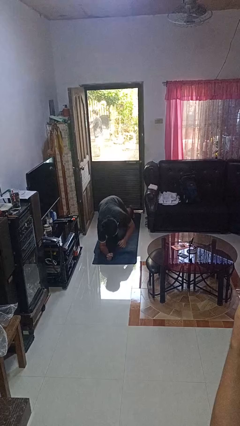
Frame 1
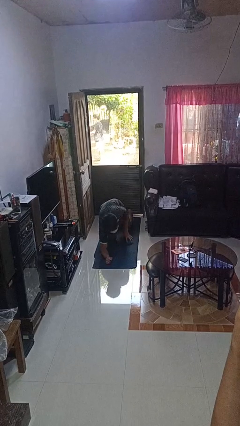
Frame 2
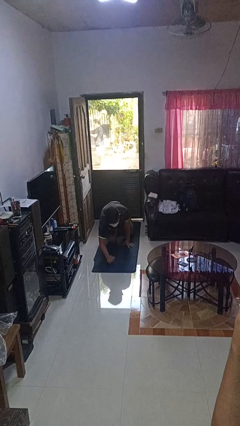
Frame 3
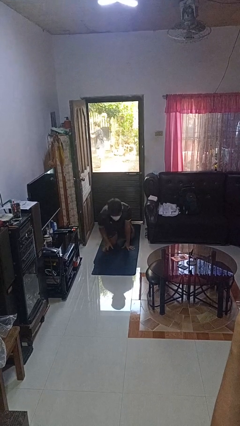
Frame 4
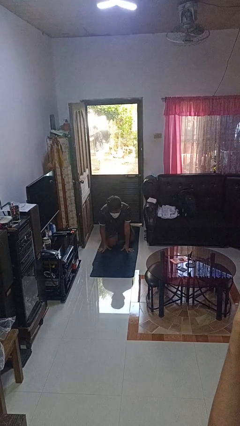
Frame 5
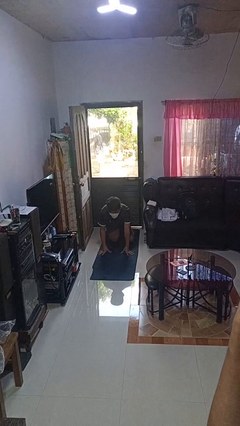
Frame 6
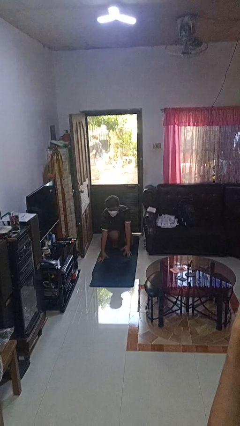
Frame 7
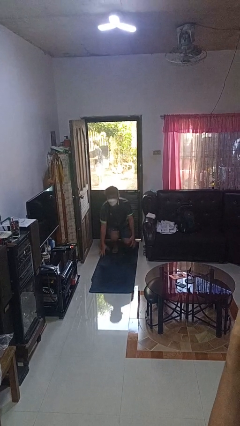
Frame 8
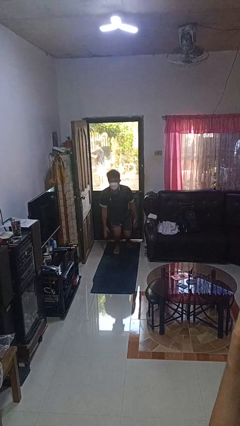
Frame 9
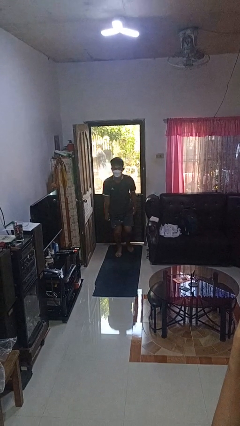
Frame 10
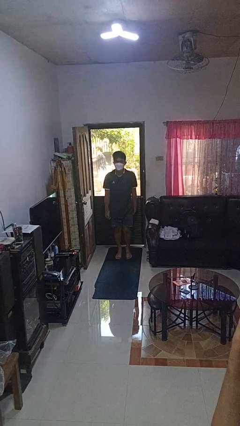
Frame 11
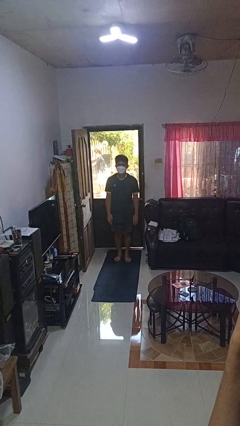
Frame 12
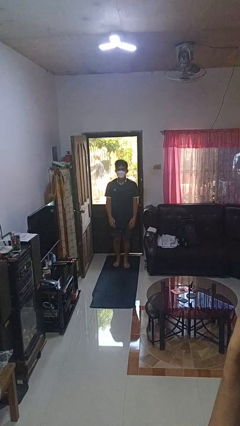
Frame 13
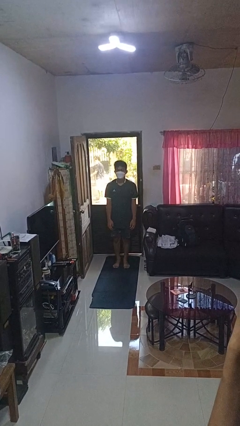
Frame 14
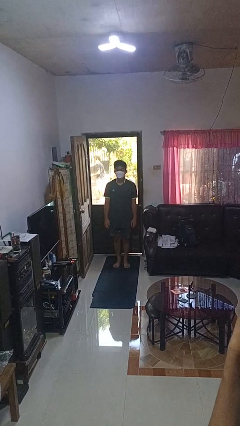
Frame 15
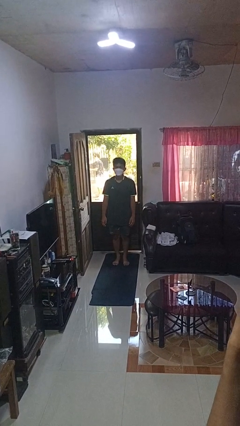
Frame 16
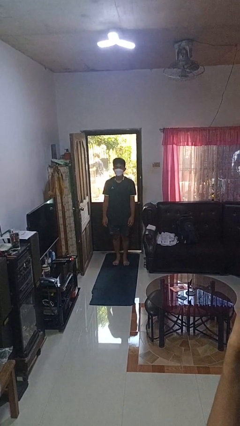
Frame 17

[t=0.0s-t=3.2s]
person stands up from floor

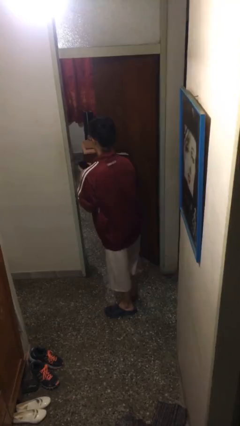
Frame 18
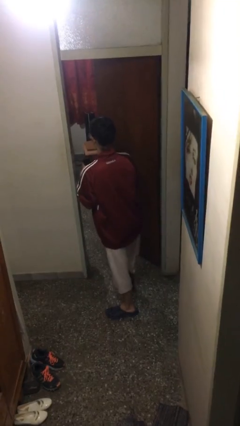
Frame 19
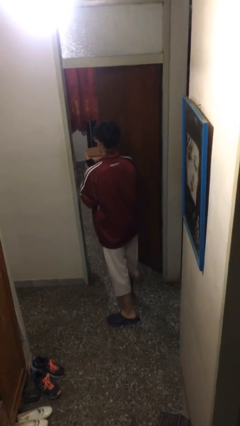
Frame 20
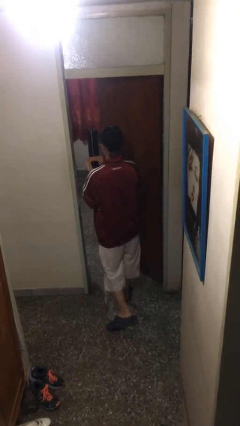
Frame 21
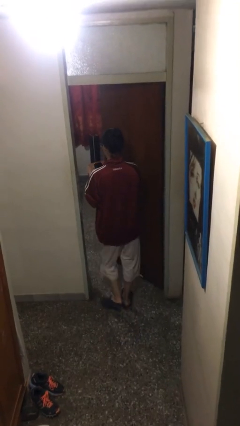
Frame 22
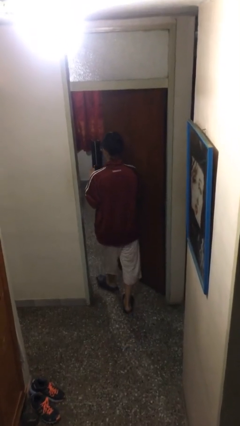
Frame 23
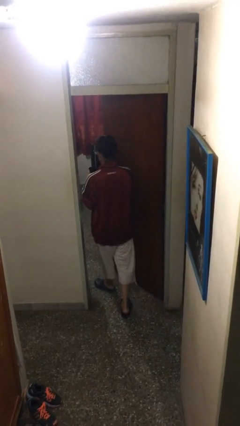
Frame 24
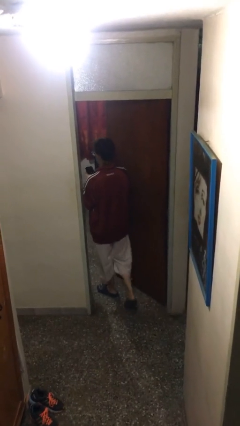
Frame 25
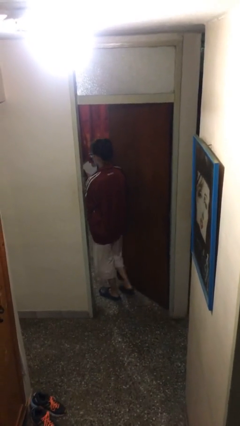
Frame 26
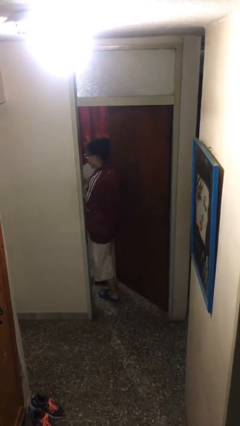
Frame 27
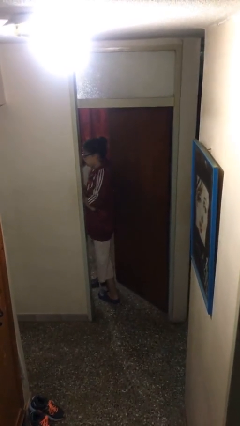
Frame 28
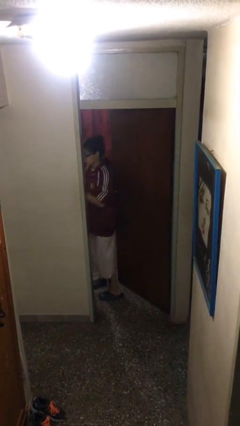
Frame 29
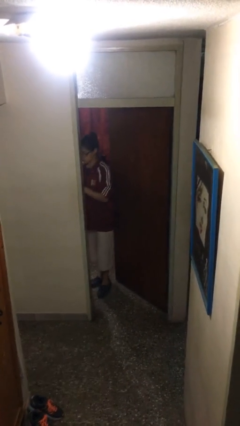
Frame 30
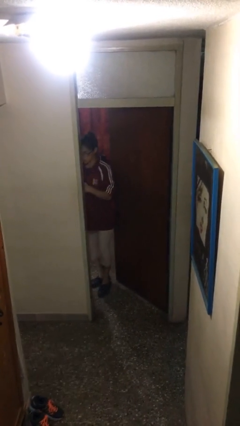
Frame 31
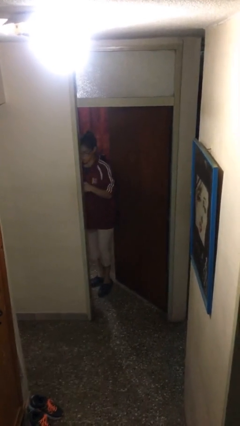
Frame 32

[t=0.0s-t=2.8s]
person exits scene through structure

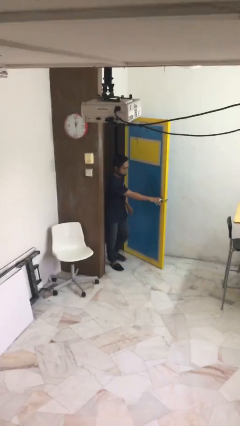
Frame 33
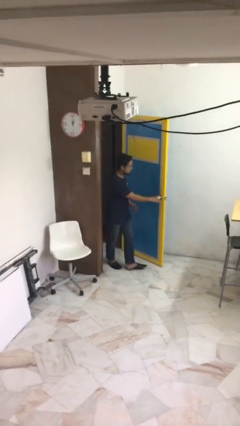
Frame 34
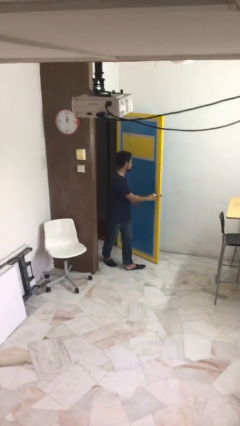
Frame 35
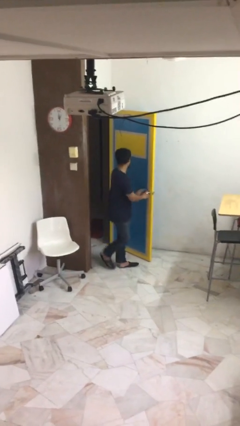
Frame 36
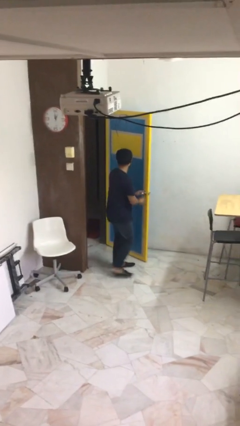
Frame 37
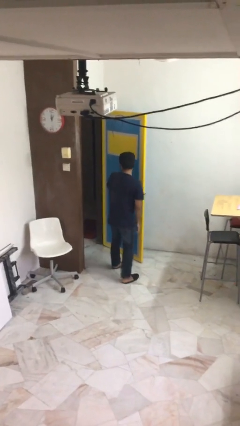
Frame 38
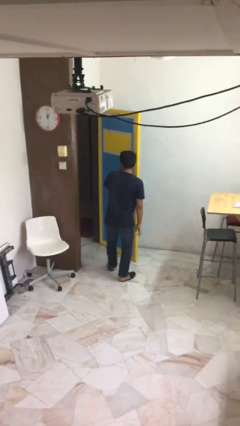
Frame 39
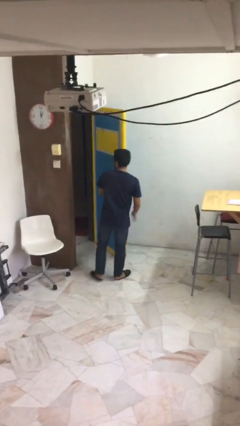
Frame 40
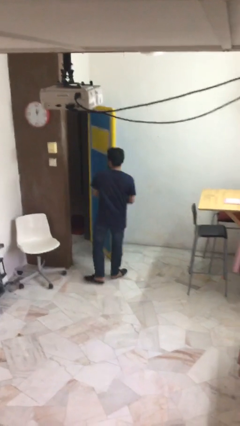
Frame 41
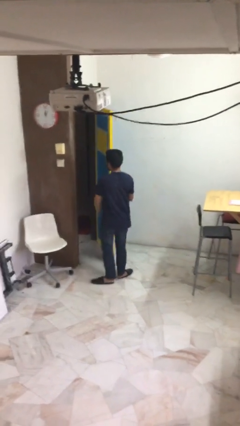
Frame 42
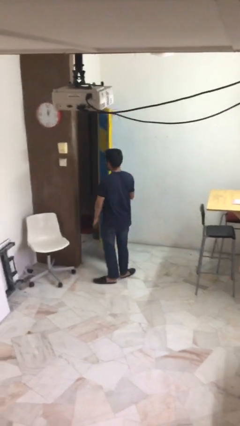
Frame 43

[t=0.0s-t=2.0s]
person enters scene through structure

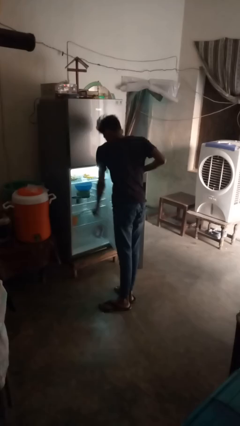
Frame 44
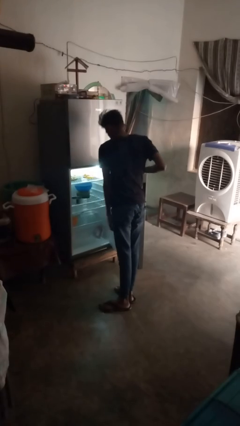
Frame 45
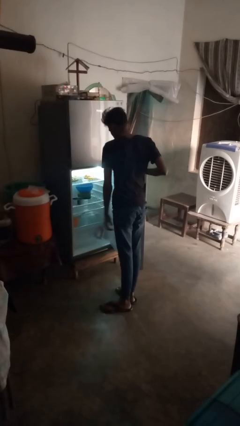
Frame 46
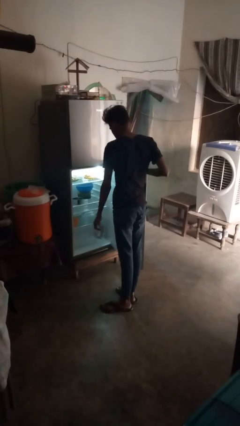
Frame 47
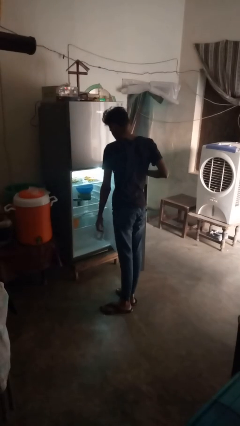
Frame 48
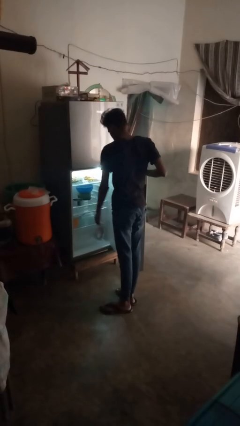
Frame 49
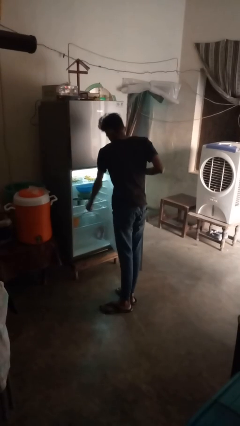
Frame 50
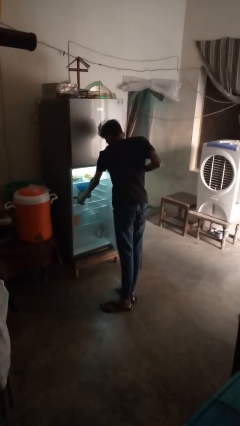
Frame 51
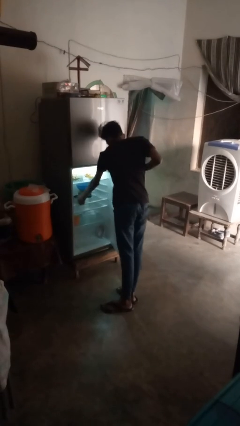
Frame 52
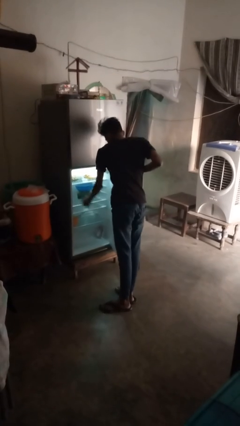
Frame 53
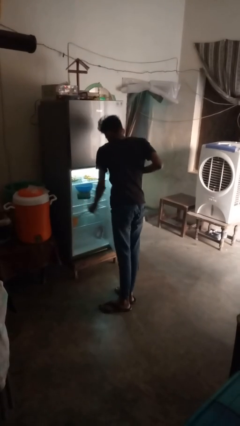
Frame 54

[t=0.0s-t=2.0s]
person takes object from refrigerator

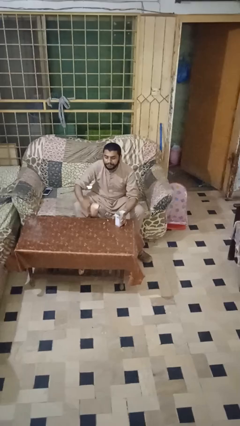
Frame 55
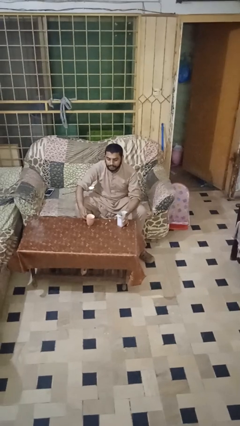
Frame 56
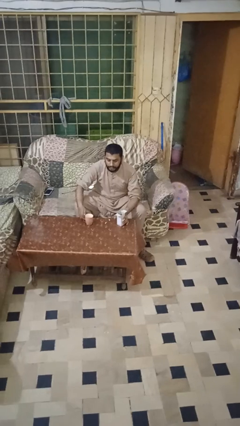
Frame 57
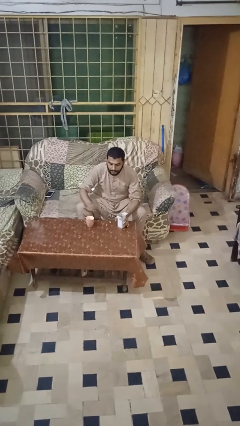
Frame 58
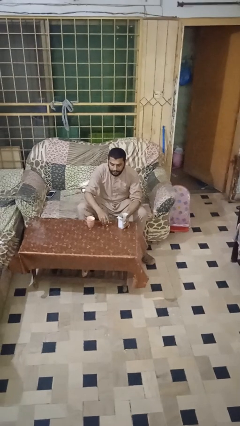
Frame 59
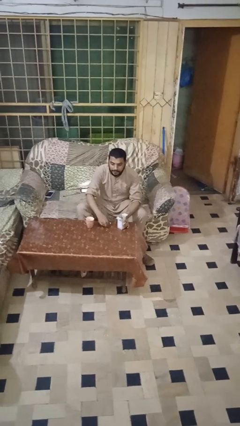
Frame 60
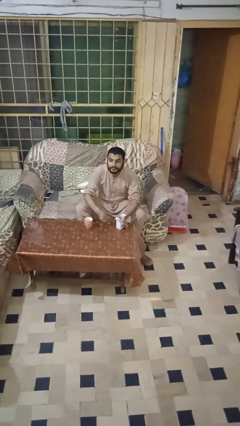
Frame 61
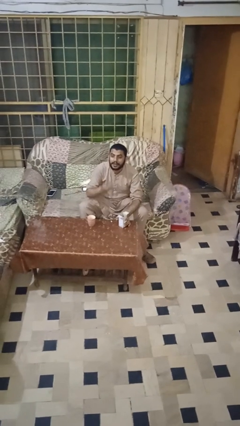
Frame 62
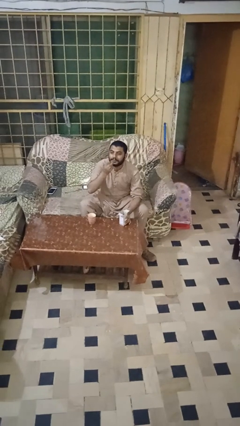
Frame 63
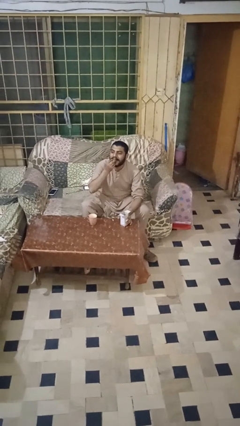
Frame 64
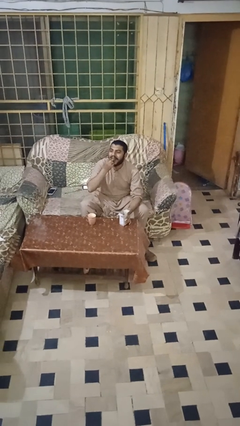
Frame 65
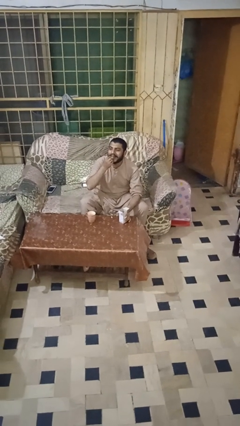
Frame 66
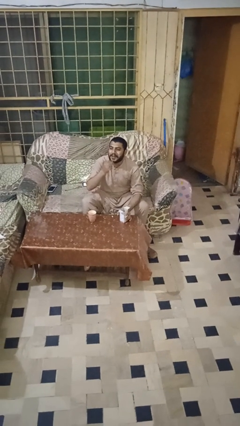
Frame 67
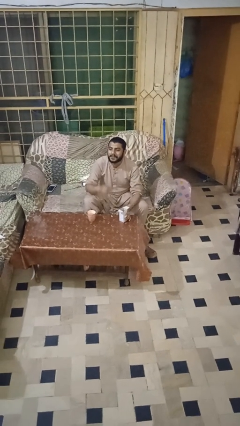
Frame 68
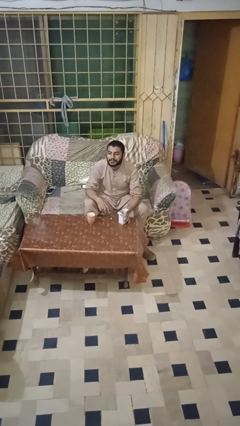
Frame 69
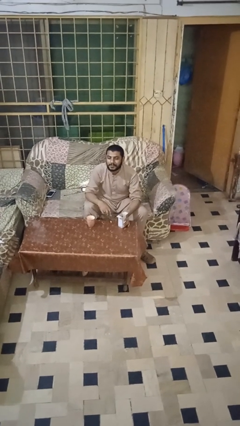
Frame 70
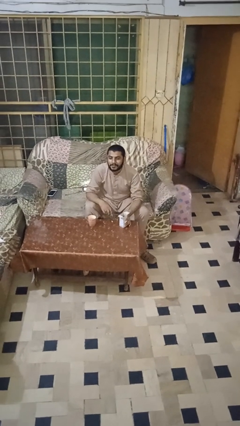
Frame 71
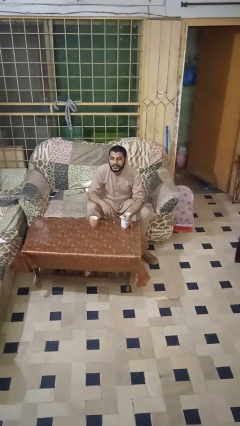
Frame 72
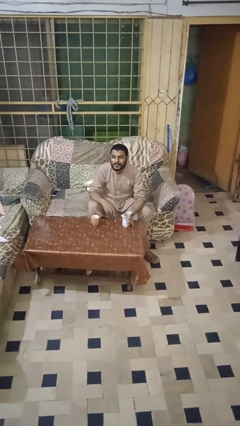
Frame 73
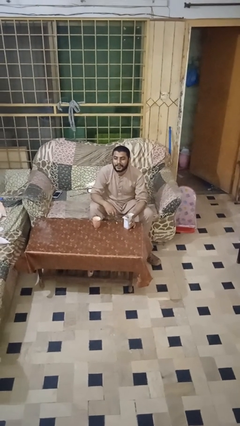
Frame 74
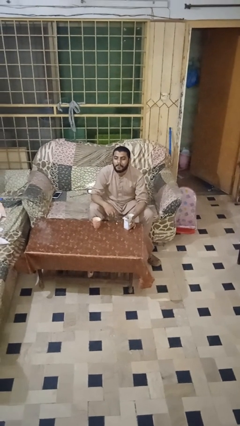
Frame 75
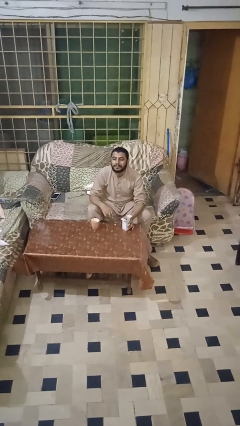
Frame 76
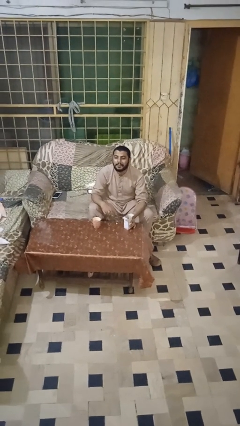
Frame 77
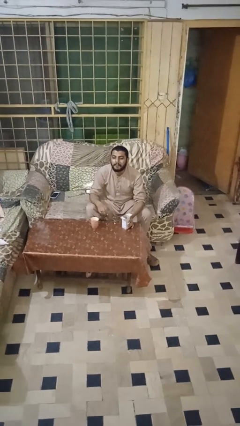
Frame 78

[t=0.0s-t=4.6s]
person takes medicine pills

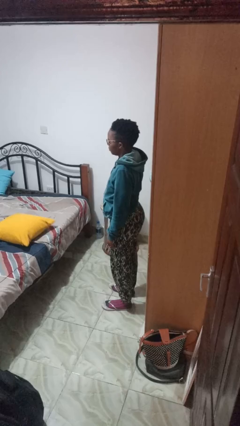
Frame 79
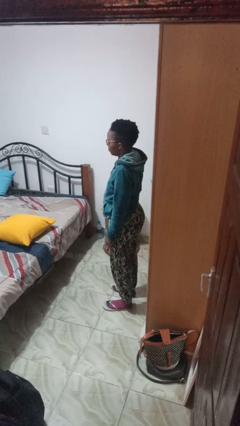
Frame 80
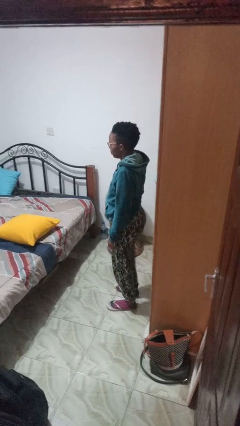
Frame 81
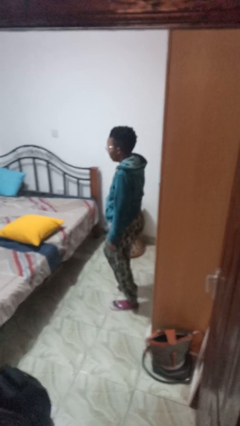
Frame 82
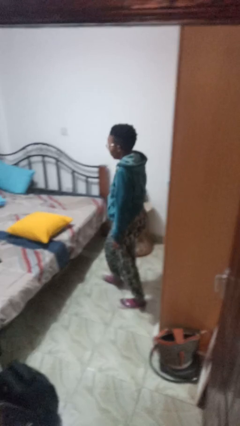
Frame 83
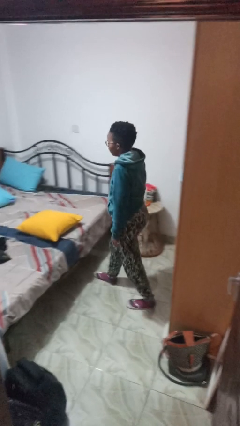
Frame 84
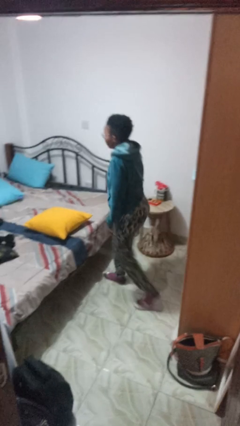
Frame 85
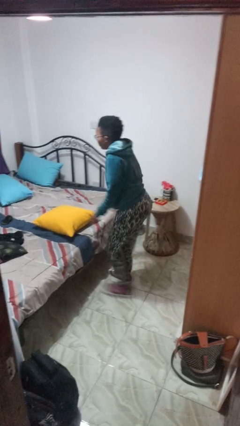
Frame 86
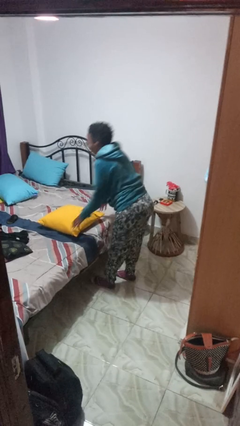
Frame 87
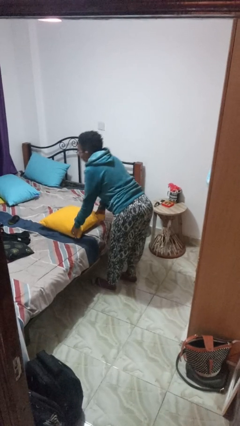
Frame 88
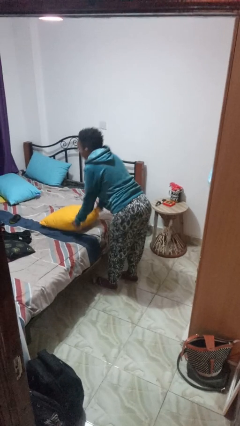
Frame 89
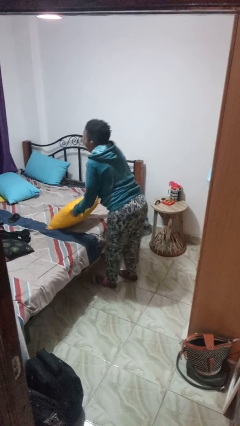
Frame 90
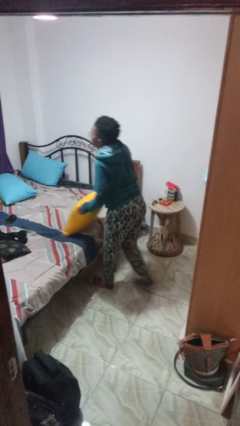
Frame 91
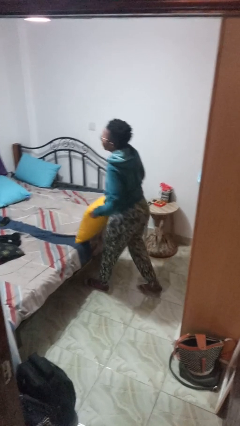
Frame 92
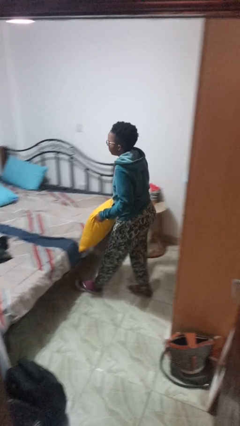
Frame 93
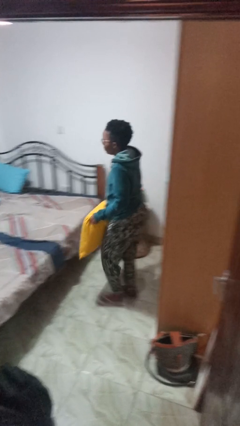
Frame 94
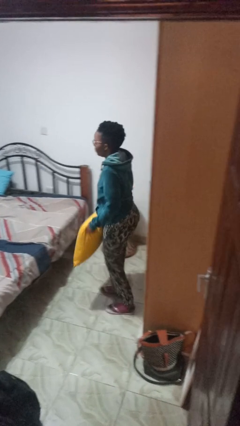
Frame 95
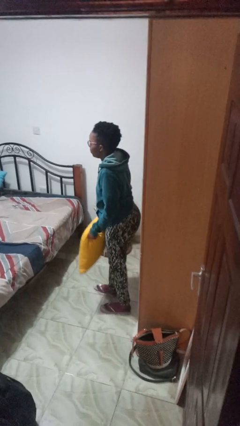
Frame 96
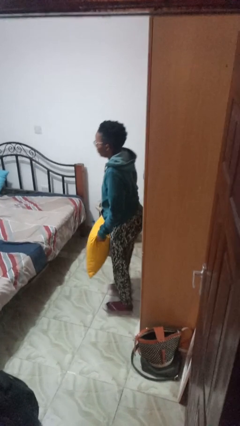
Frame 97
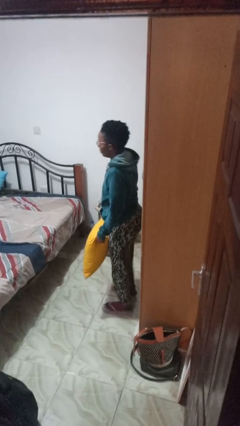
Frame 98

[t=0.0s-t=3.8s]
person picks up object from bed
